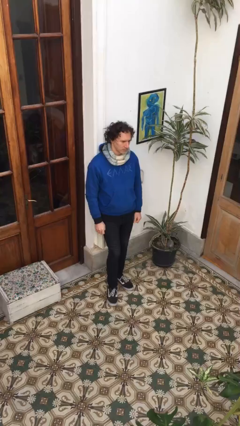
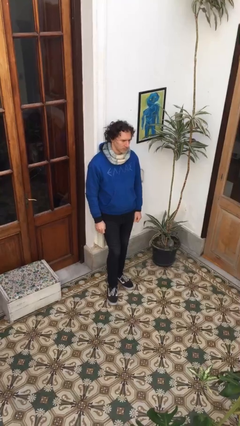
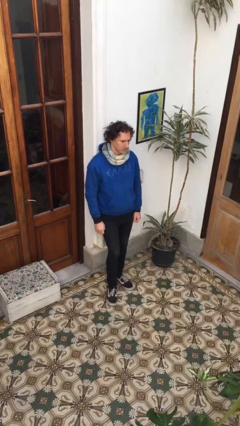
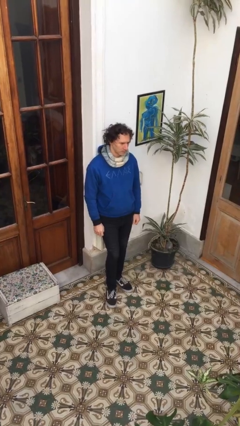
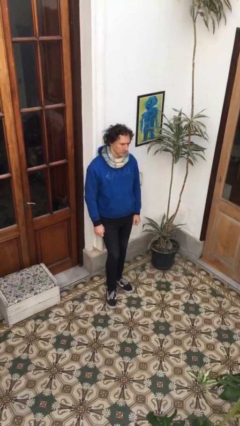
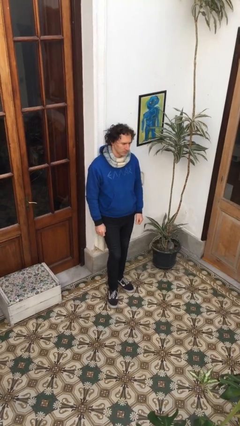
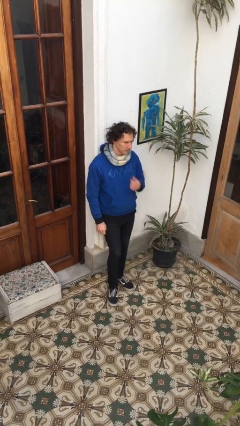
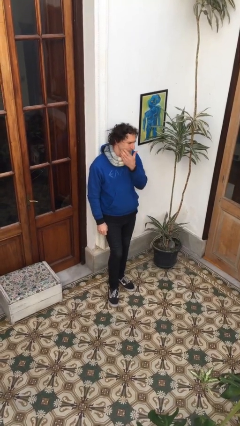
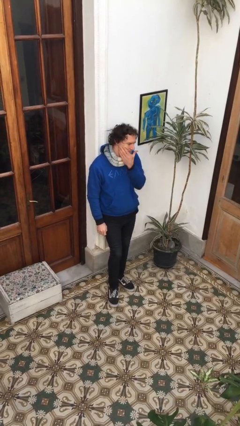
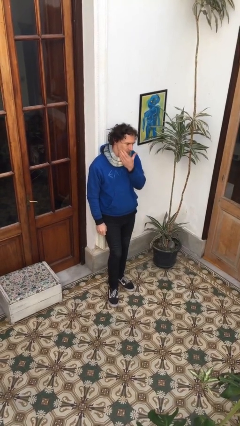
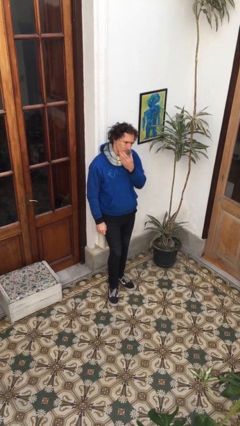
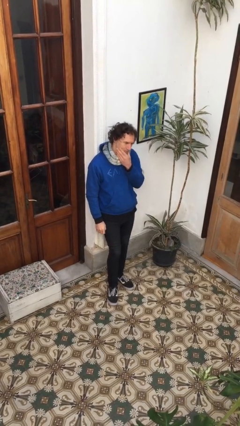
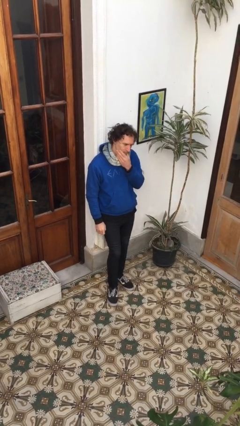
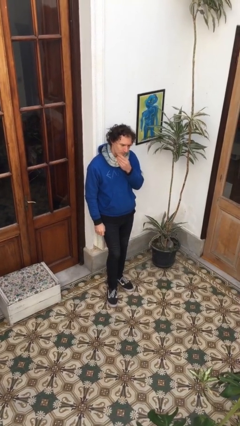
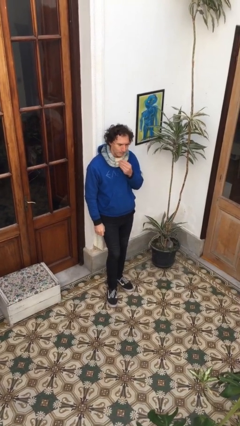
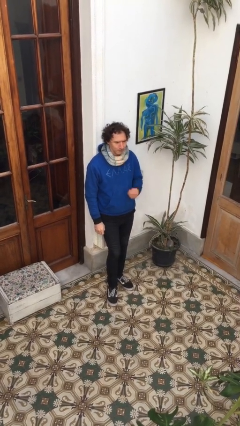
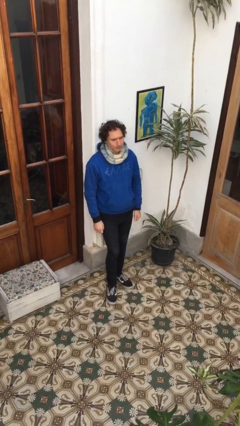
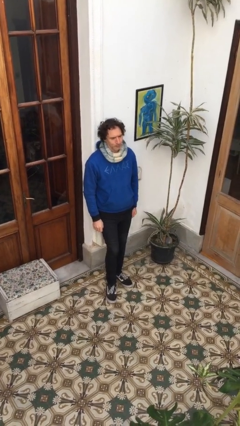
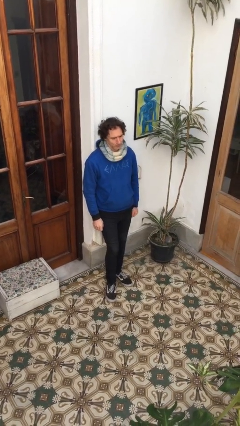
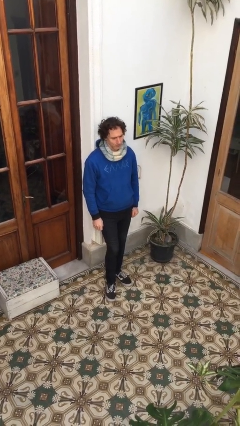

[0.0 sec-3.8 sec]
person scratches face

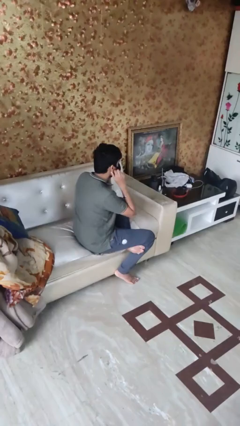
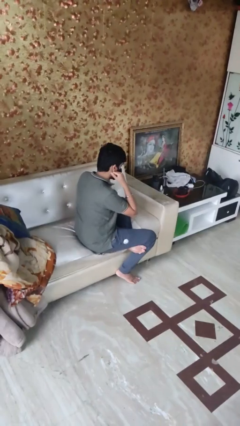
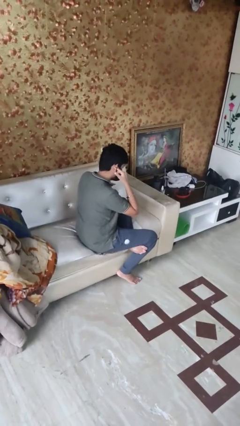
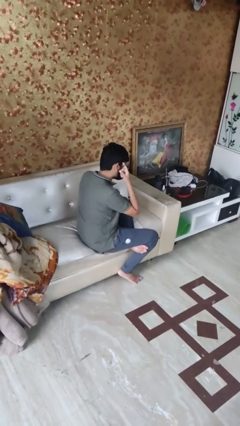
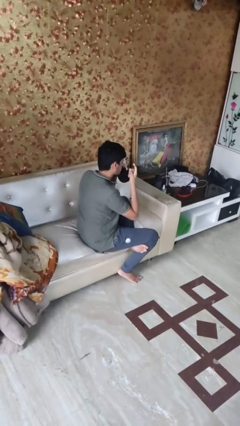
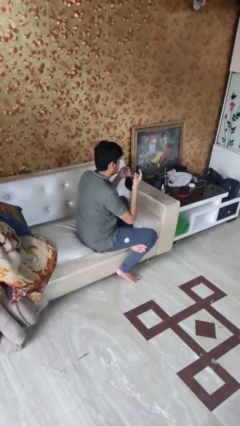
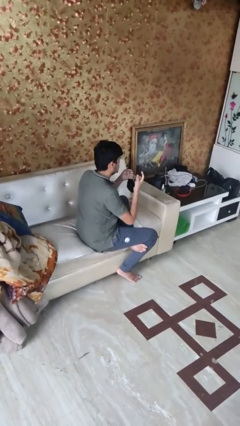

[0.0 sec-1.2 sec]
person takes off facemask

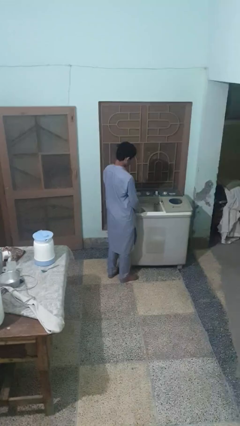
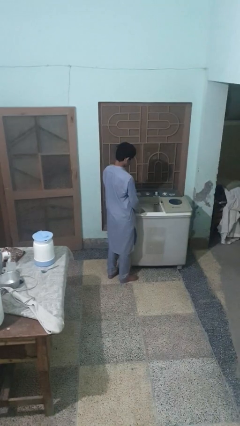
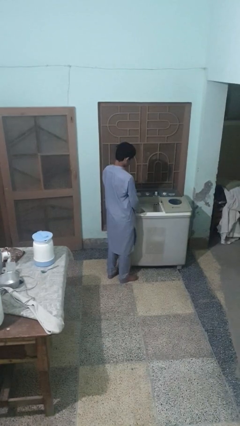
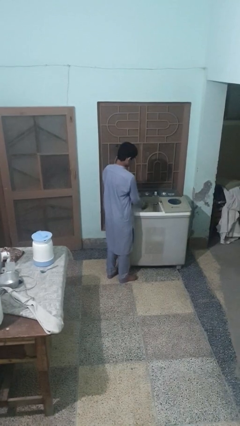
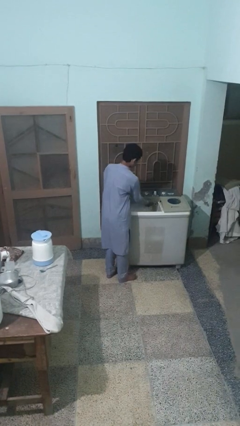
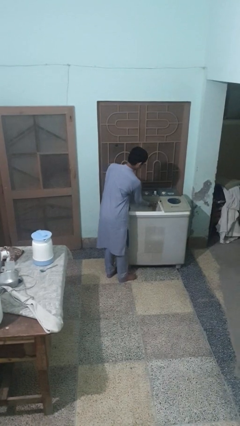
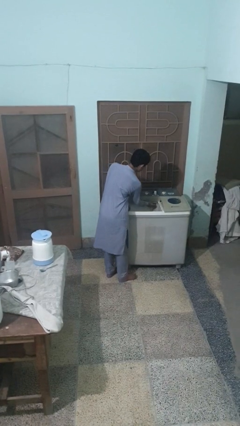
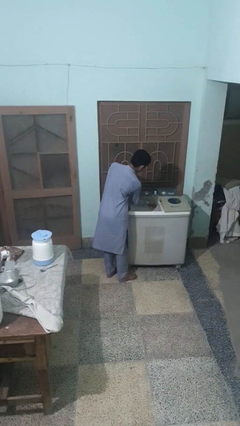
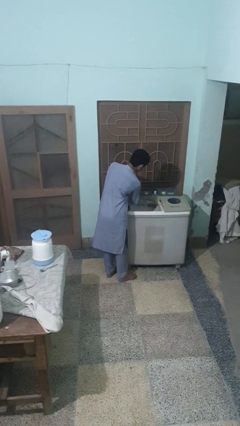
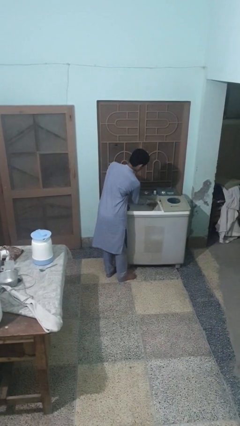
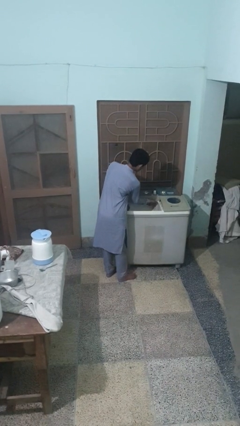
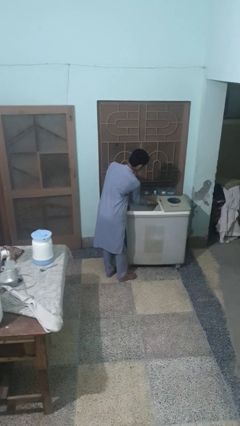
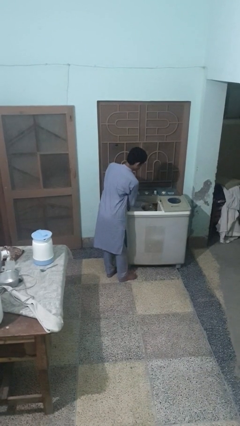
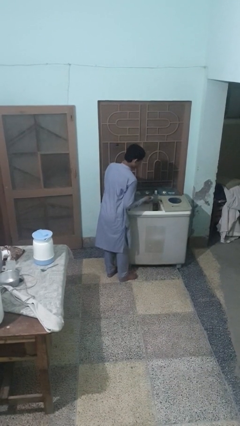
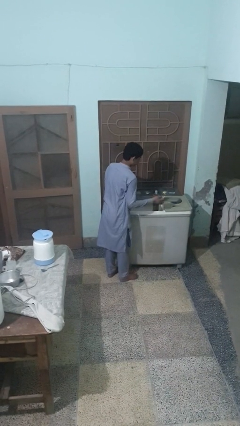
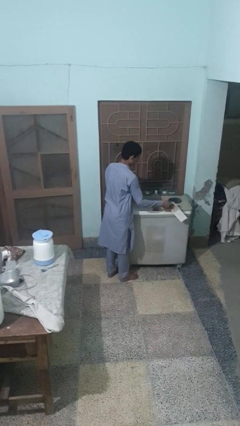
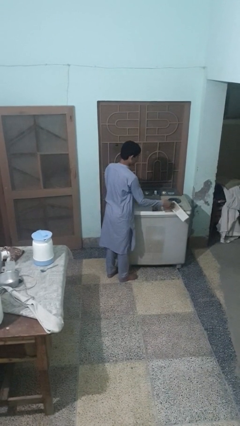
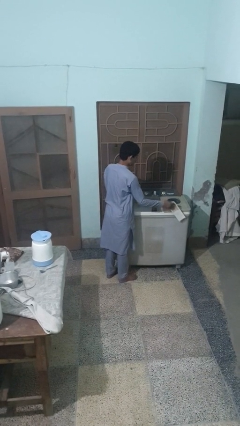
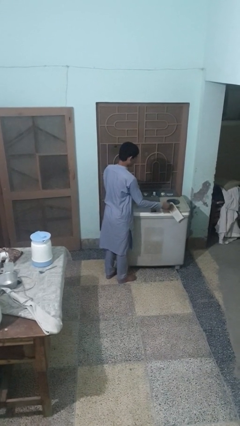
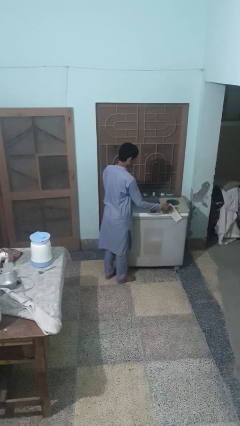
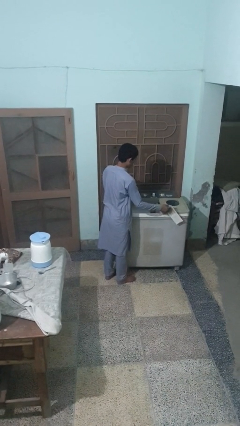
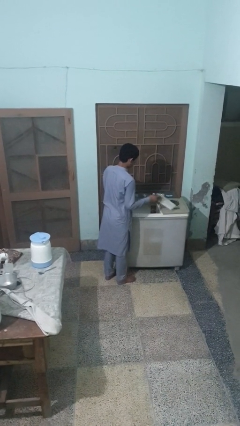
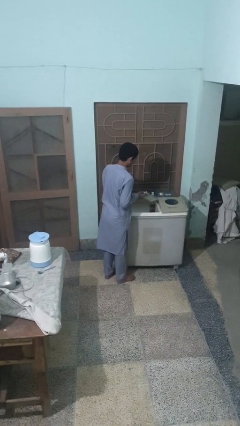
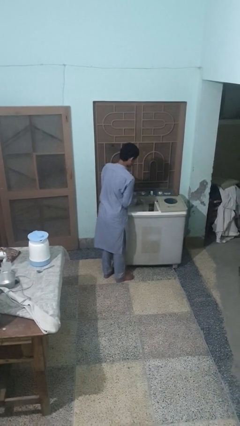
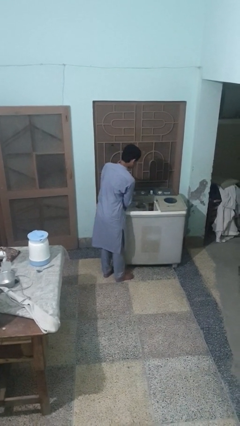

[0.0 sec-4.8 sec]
person cleans dryer lint trap

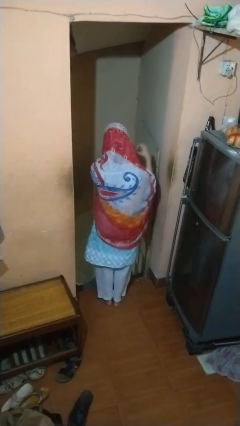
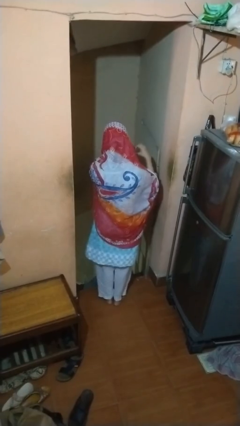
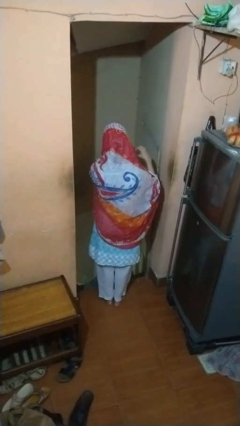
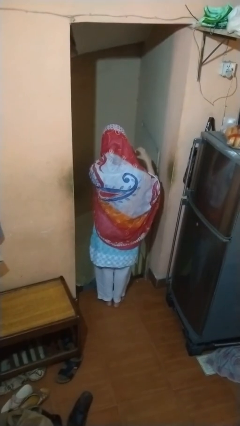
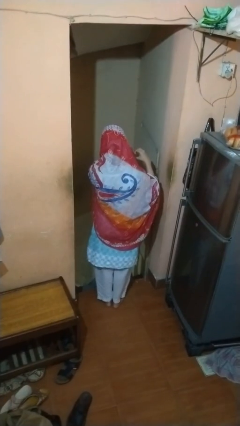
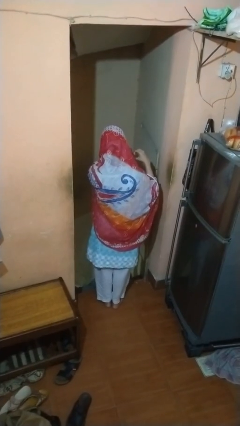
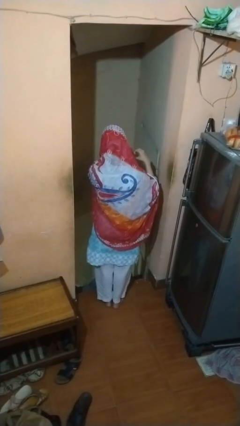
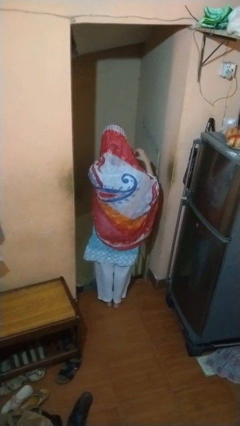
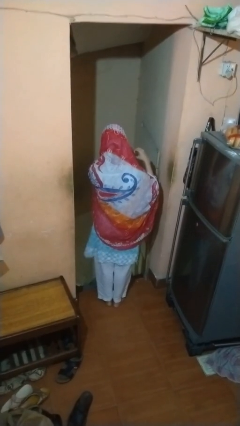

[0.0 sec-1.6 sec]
person gestures heart

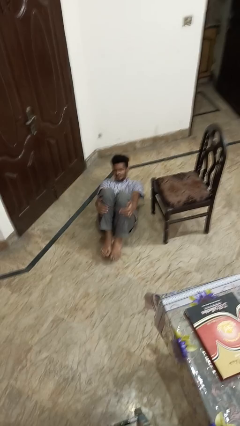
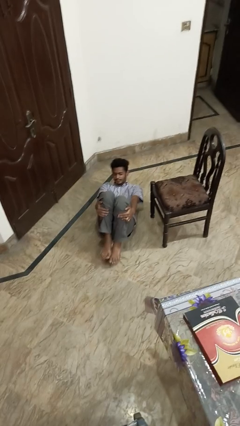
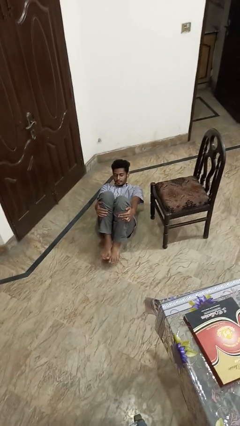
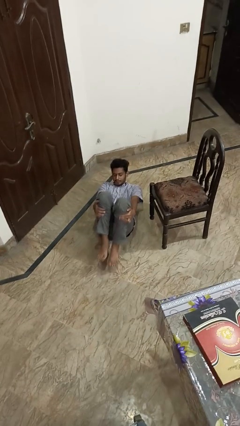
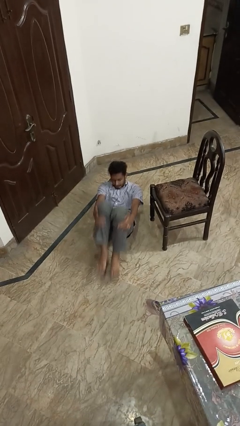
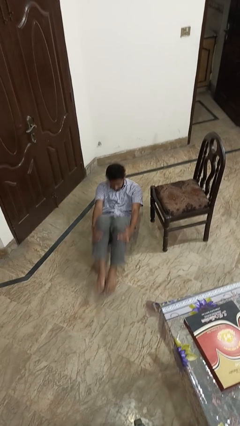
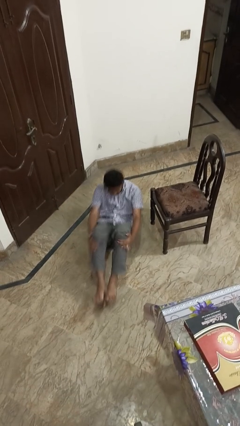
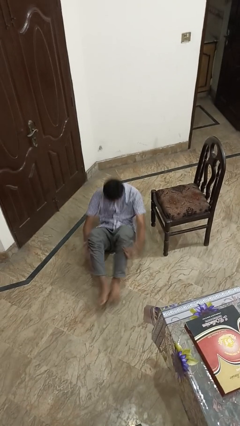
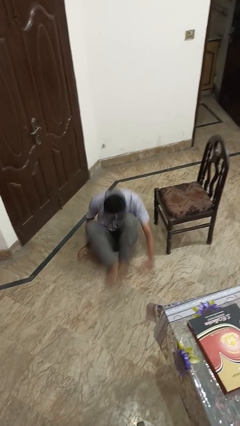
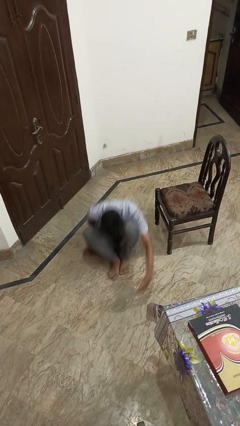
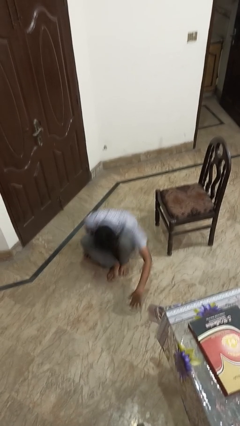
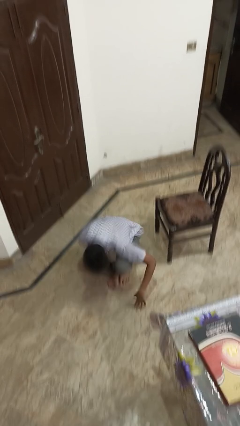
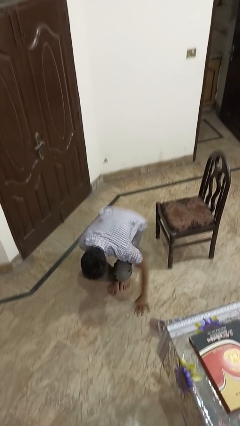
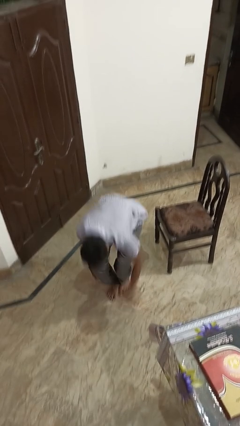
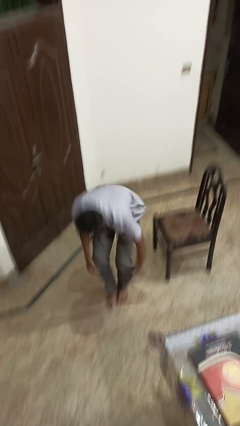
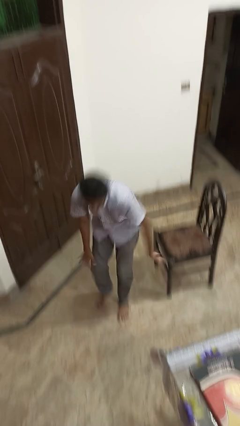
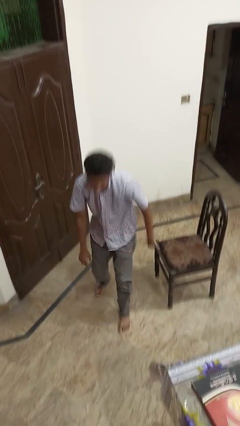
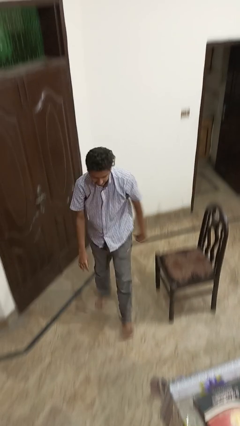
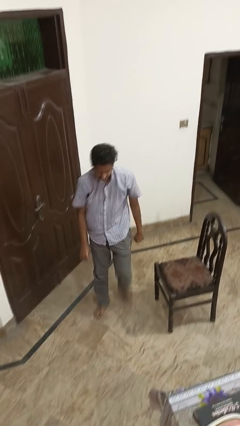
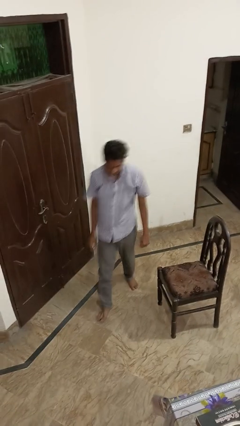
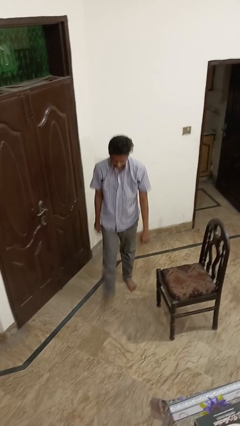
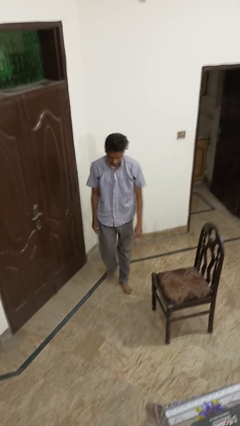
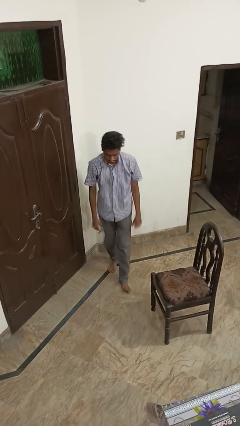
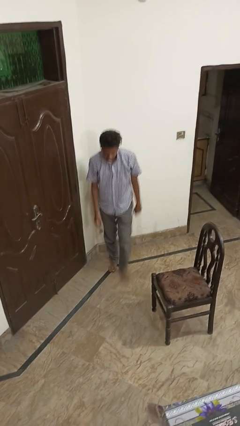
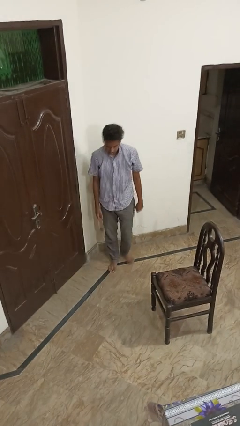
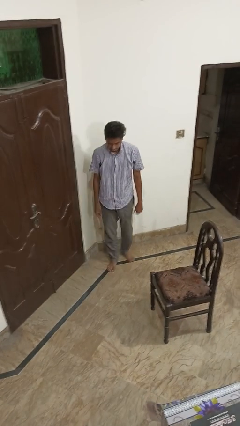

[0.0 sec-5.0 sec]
person stands up from floor

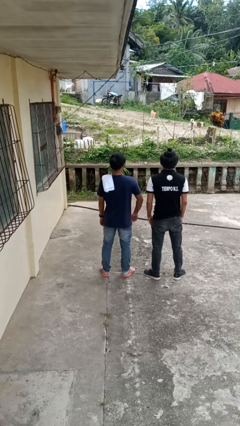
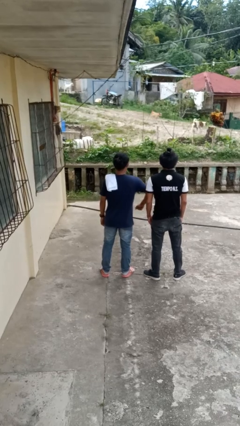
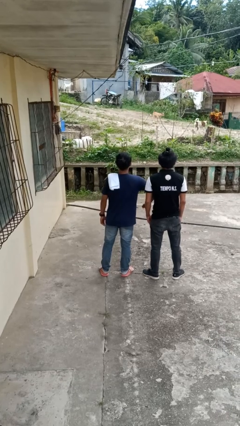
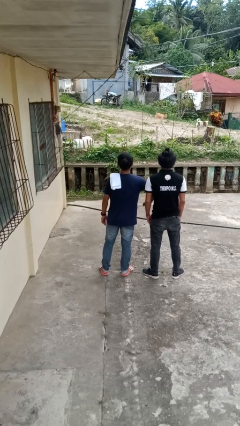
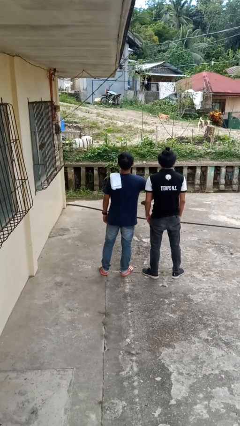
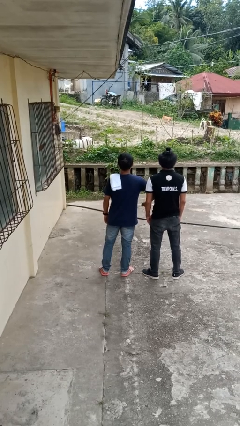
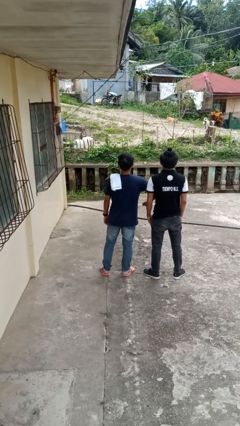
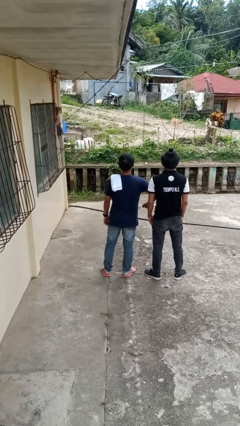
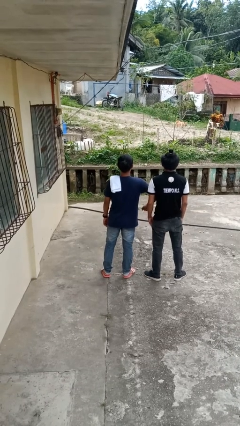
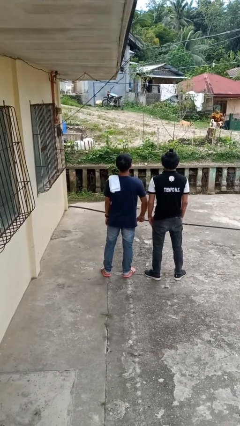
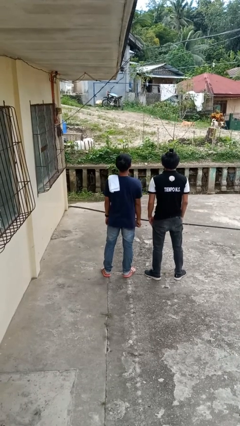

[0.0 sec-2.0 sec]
person nudges person with elbow
